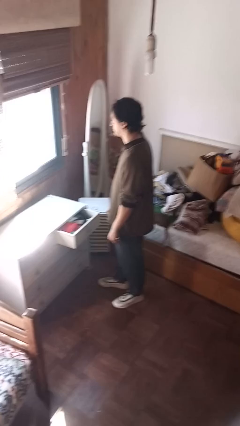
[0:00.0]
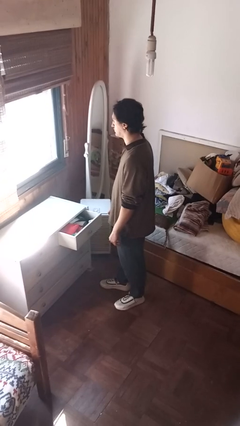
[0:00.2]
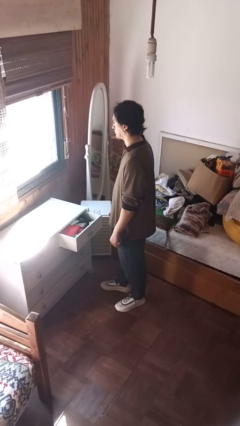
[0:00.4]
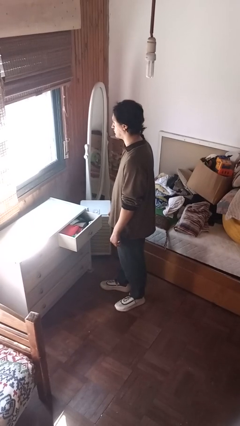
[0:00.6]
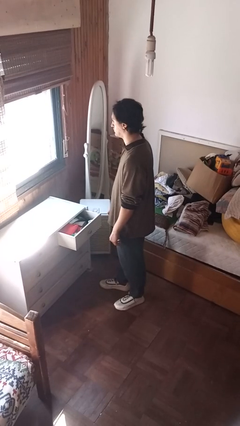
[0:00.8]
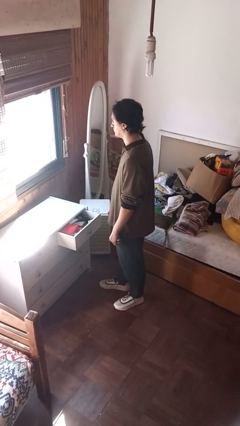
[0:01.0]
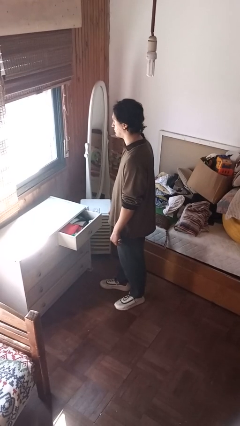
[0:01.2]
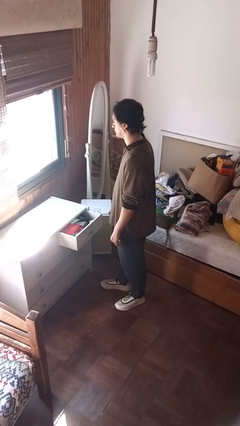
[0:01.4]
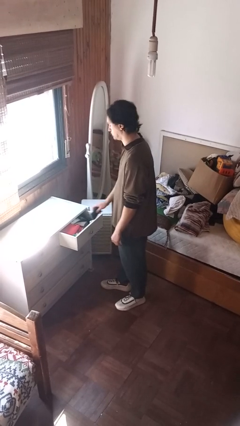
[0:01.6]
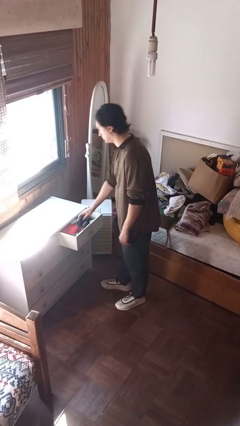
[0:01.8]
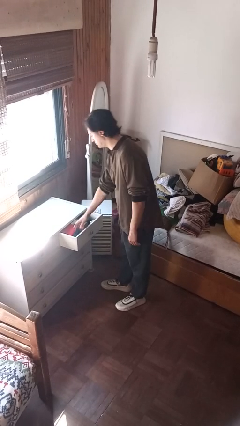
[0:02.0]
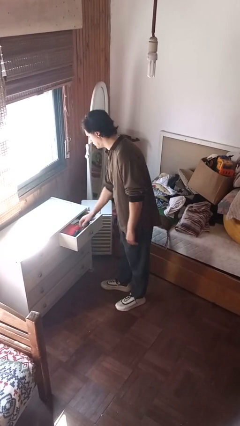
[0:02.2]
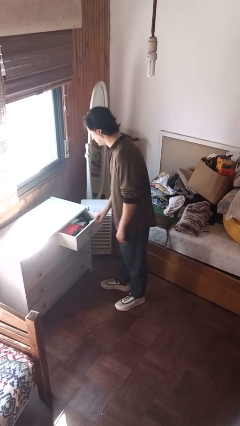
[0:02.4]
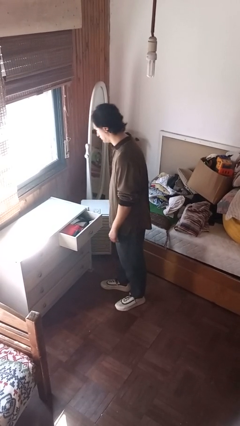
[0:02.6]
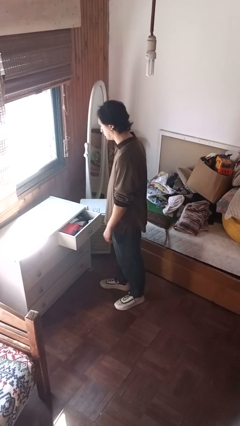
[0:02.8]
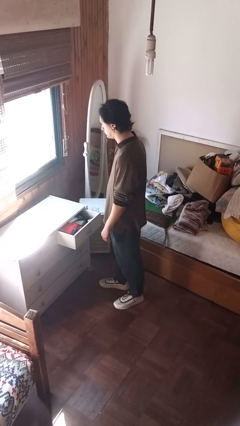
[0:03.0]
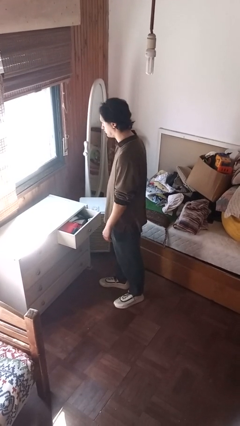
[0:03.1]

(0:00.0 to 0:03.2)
person puts clothes into dresser

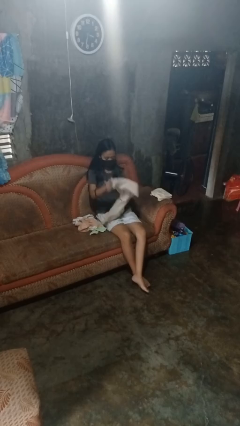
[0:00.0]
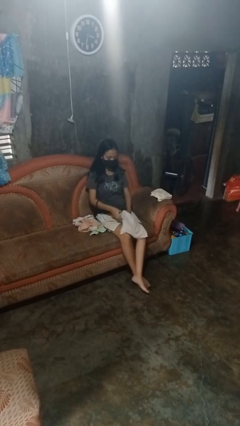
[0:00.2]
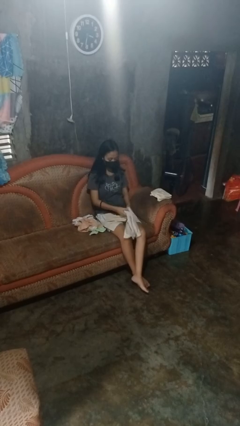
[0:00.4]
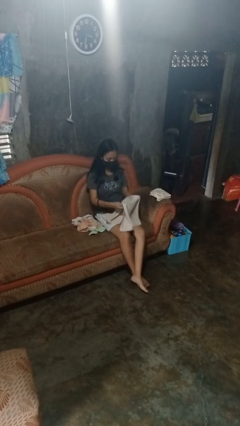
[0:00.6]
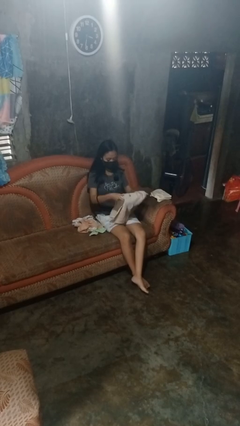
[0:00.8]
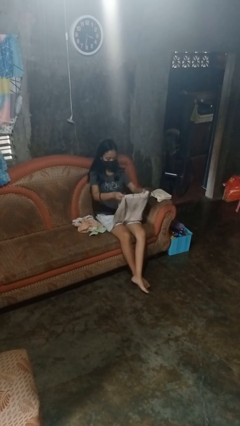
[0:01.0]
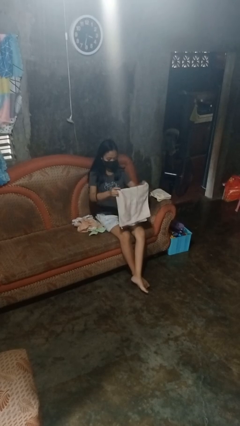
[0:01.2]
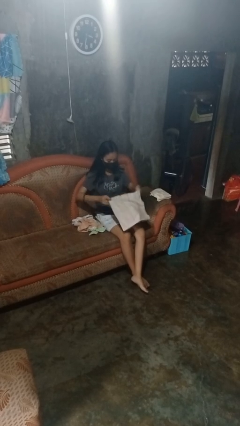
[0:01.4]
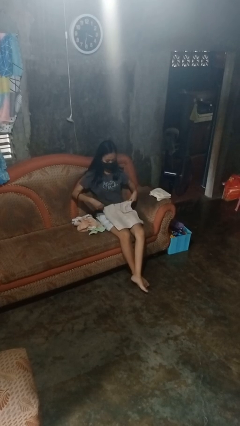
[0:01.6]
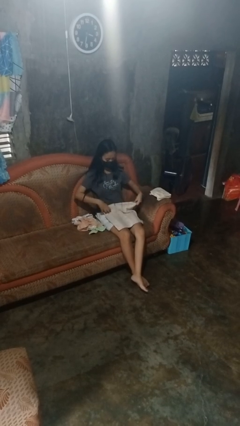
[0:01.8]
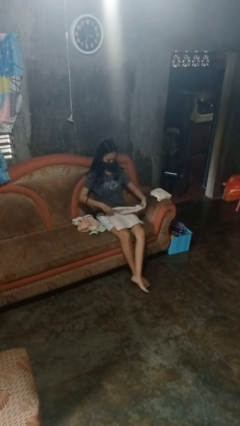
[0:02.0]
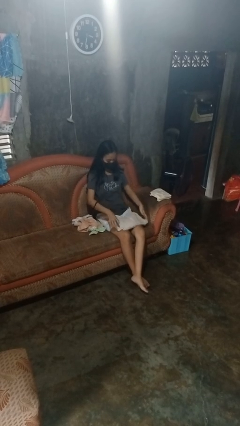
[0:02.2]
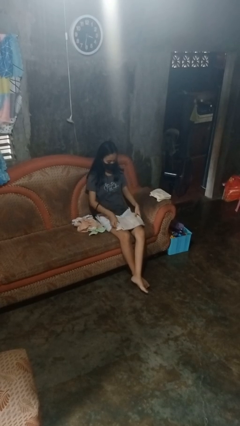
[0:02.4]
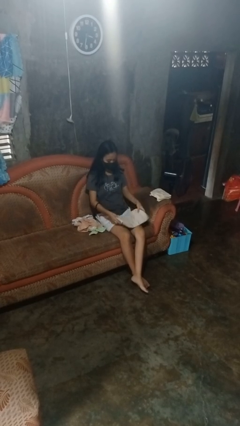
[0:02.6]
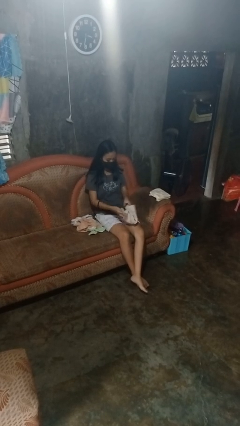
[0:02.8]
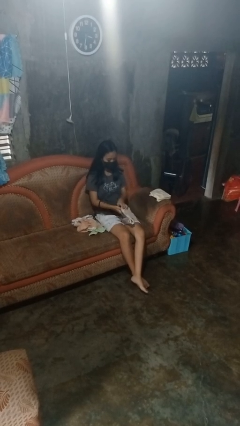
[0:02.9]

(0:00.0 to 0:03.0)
person folds towel

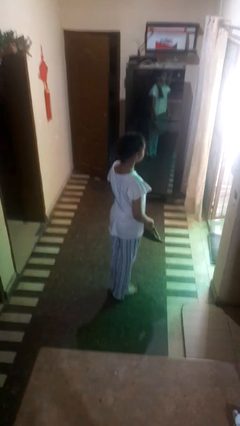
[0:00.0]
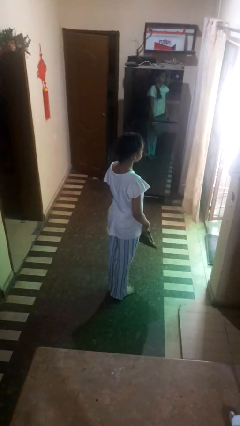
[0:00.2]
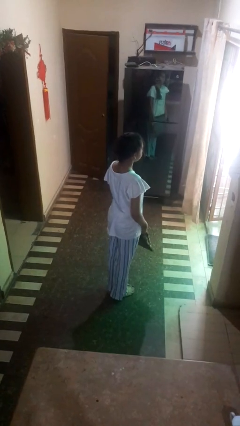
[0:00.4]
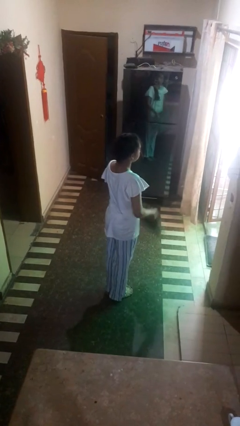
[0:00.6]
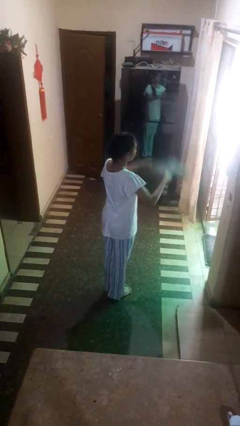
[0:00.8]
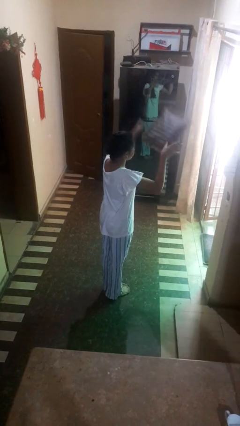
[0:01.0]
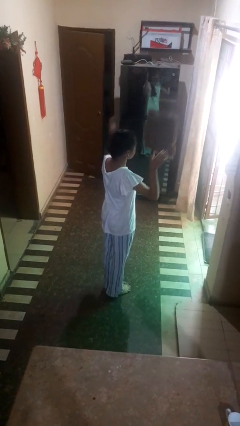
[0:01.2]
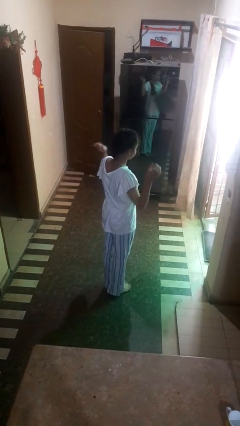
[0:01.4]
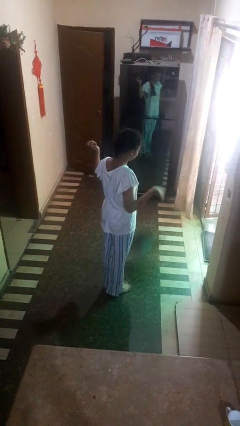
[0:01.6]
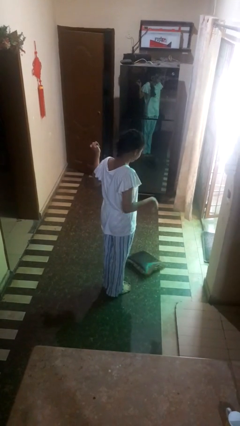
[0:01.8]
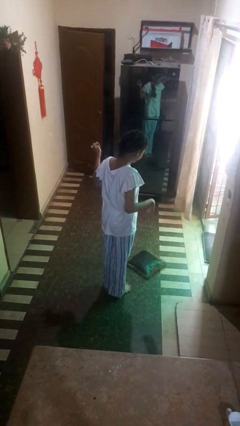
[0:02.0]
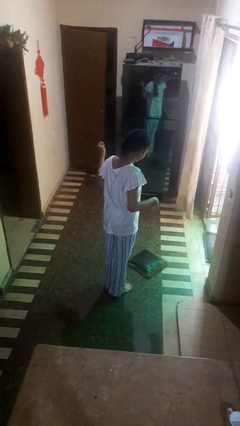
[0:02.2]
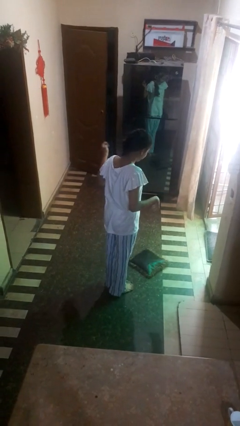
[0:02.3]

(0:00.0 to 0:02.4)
person throws object into air

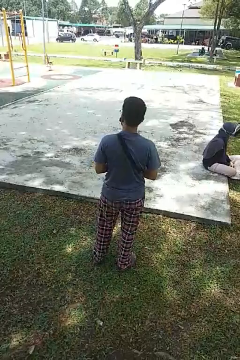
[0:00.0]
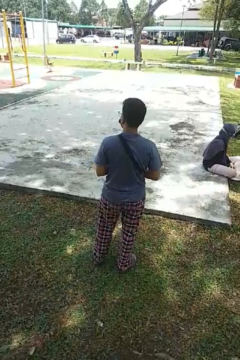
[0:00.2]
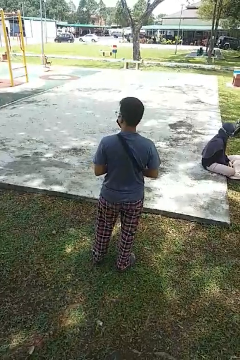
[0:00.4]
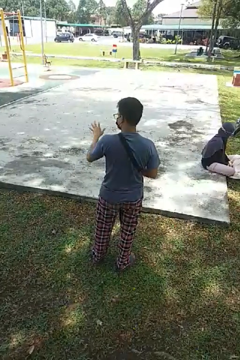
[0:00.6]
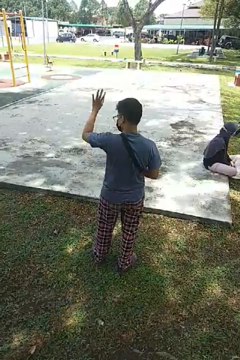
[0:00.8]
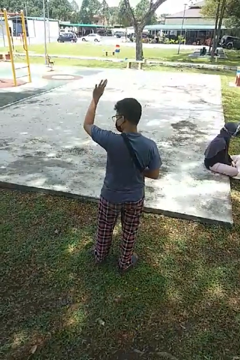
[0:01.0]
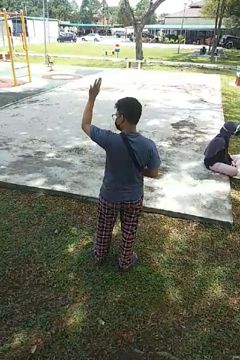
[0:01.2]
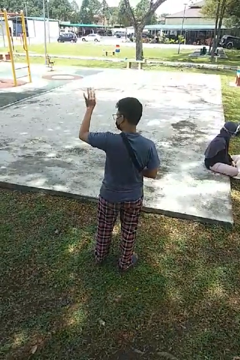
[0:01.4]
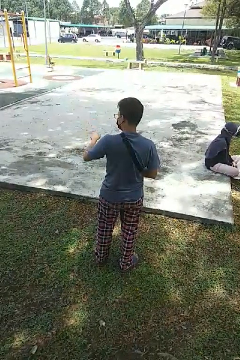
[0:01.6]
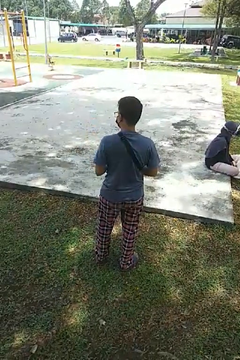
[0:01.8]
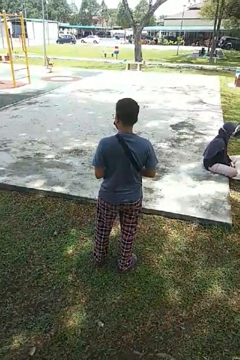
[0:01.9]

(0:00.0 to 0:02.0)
person waves at person

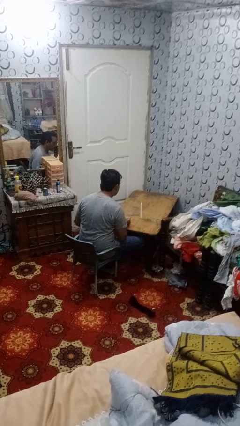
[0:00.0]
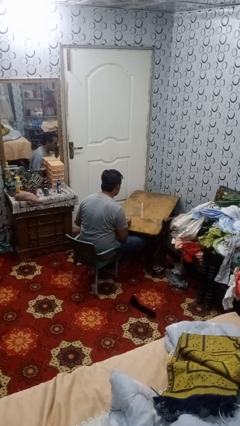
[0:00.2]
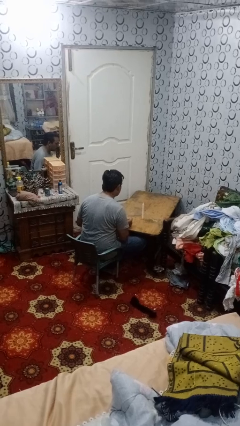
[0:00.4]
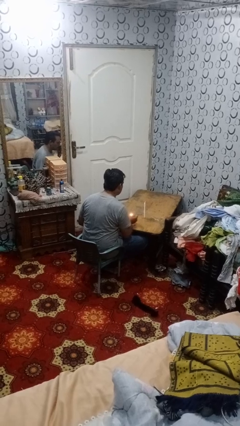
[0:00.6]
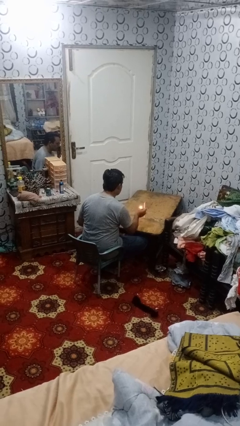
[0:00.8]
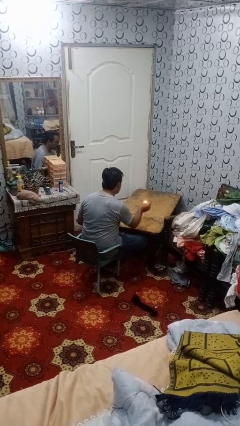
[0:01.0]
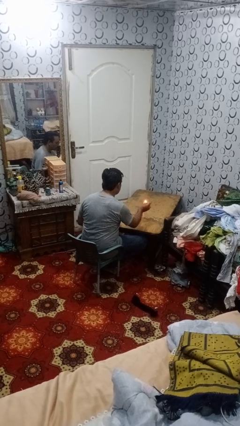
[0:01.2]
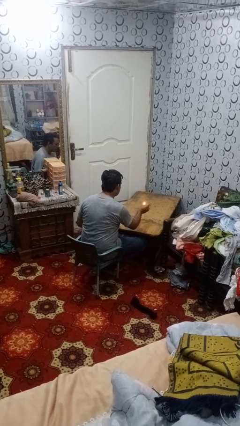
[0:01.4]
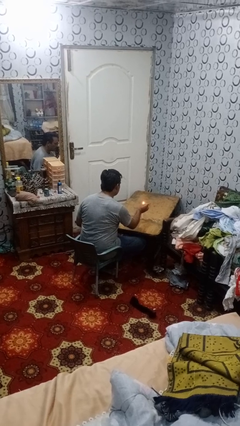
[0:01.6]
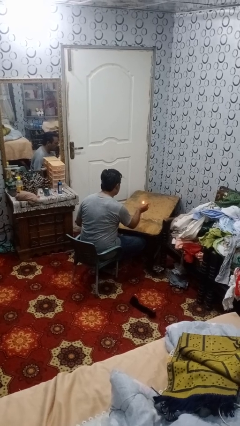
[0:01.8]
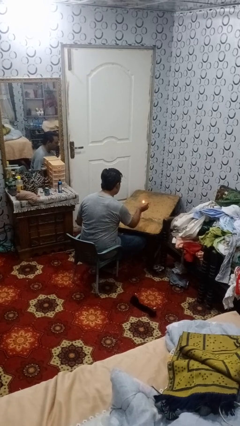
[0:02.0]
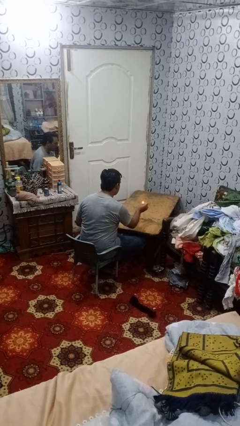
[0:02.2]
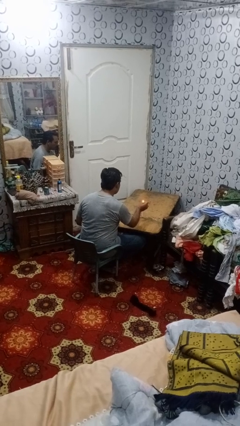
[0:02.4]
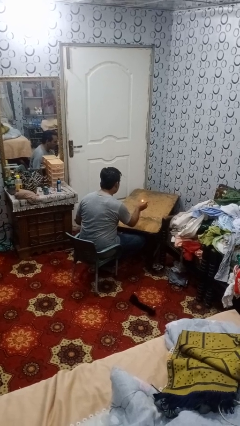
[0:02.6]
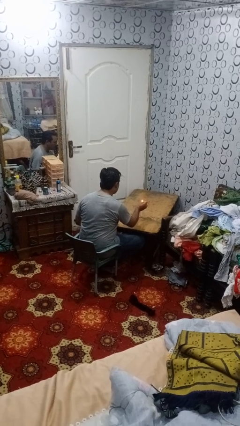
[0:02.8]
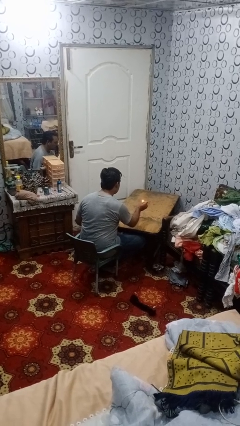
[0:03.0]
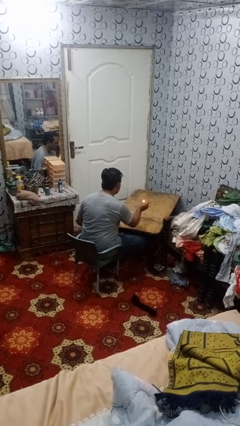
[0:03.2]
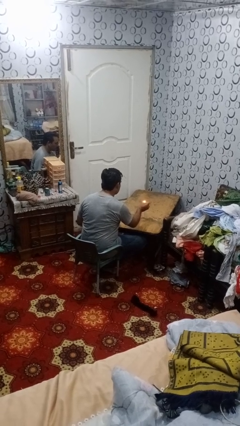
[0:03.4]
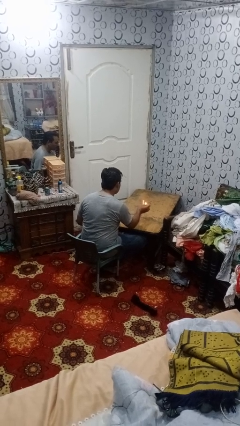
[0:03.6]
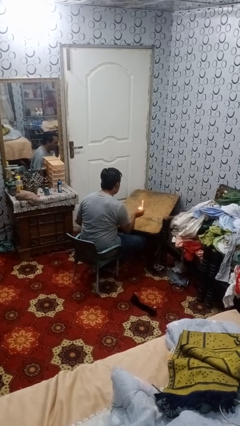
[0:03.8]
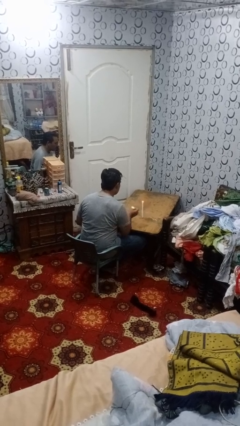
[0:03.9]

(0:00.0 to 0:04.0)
person lights candle

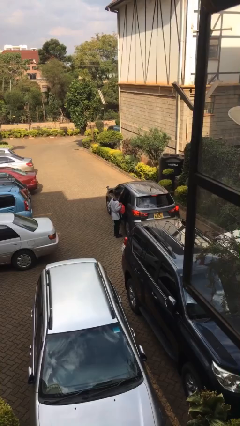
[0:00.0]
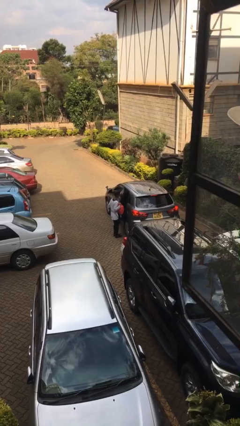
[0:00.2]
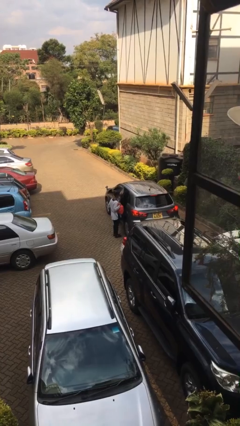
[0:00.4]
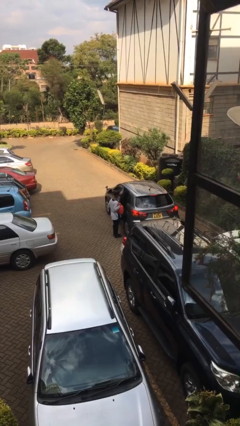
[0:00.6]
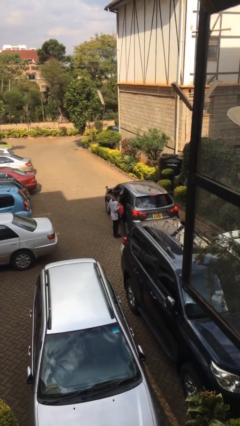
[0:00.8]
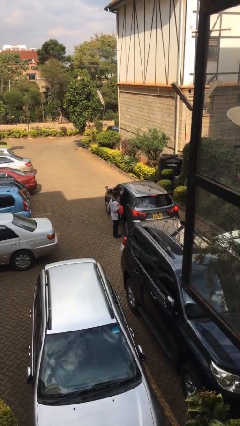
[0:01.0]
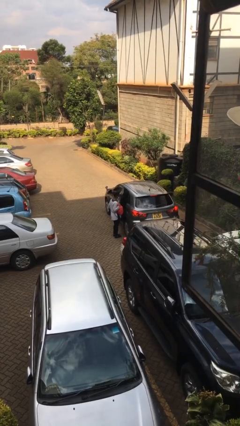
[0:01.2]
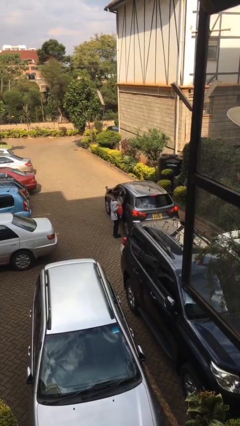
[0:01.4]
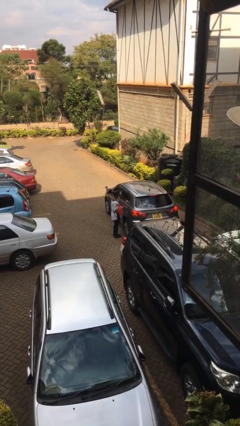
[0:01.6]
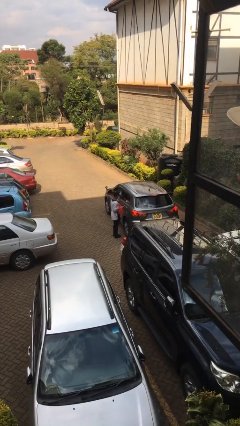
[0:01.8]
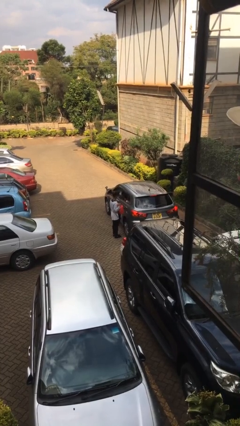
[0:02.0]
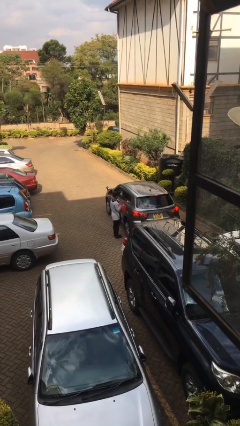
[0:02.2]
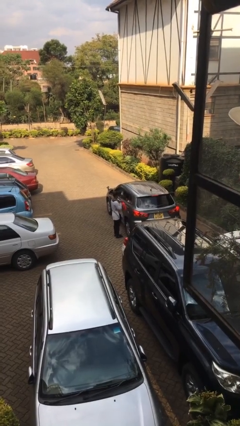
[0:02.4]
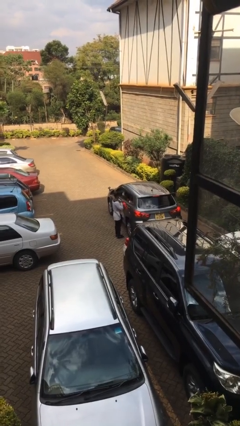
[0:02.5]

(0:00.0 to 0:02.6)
person closes car door

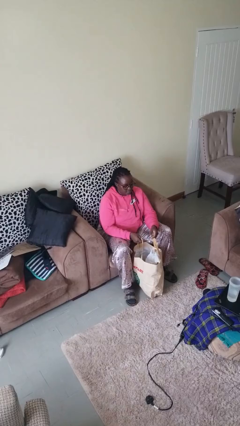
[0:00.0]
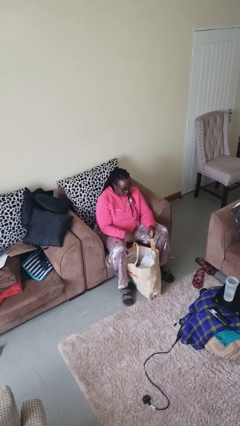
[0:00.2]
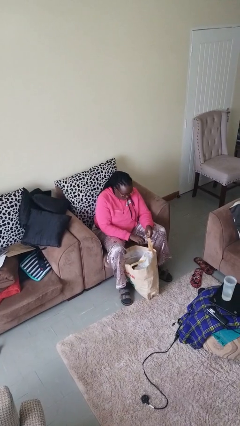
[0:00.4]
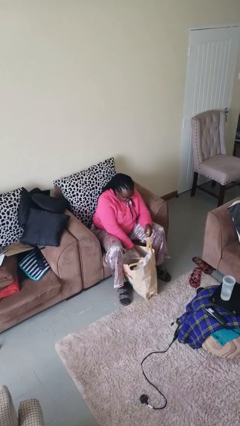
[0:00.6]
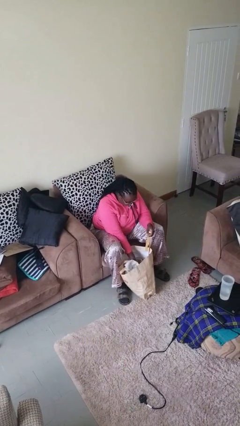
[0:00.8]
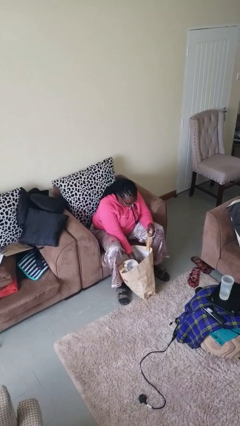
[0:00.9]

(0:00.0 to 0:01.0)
person searches in bag
